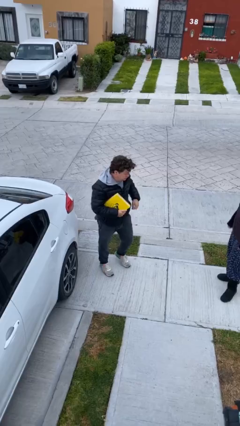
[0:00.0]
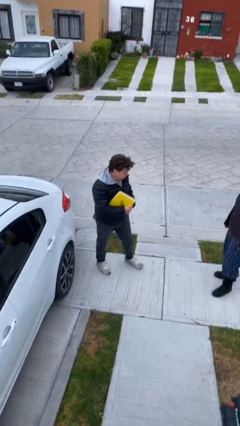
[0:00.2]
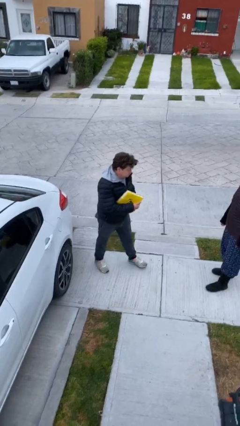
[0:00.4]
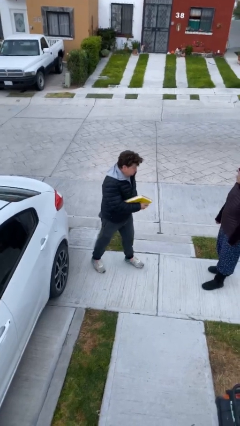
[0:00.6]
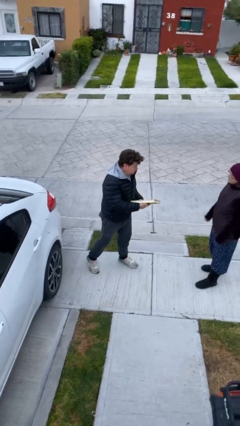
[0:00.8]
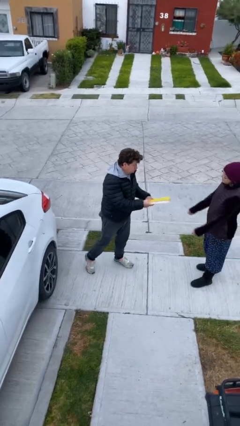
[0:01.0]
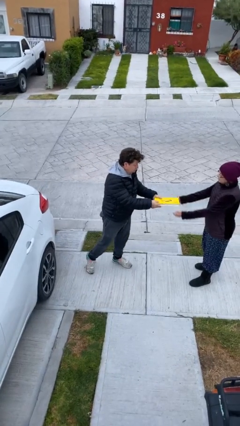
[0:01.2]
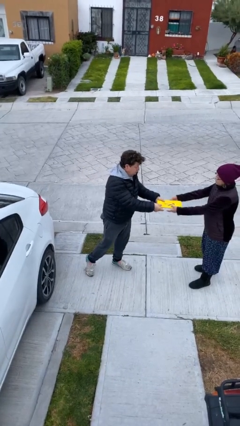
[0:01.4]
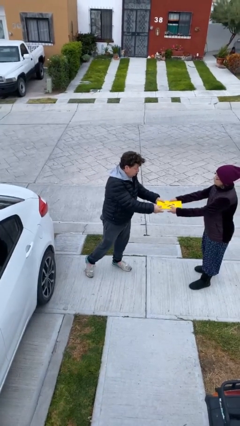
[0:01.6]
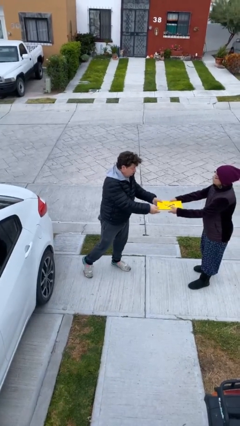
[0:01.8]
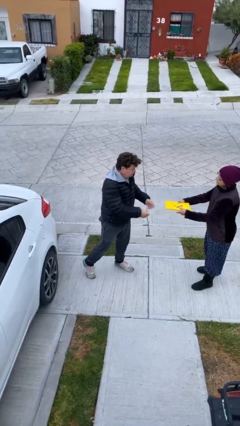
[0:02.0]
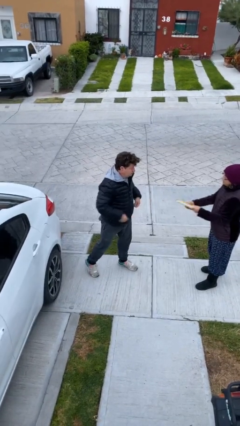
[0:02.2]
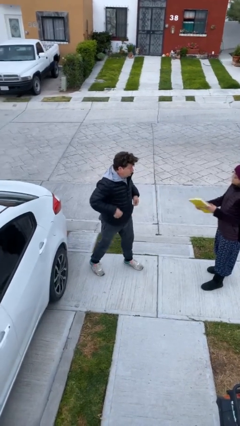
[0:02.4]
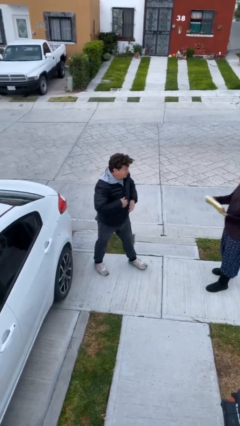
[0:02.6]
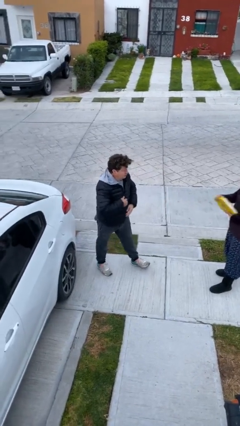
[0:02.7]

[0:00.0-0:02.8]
person transfers object to person

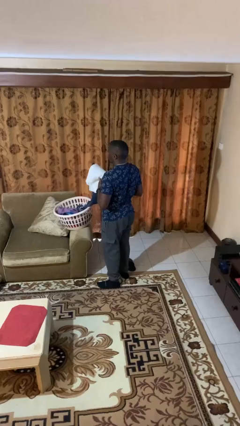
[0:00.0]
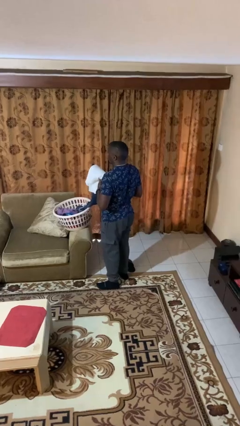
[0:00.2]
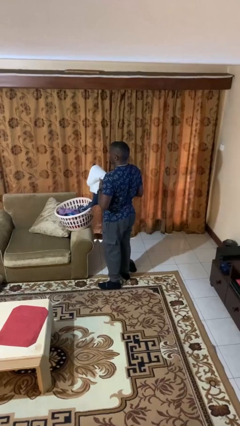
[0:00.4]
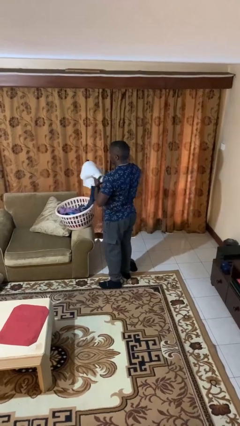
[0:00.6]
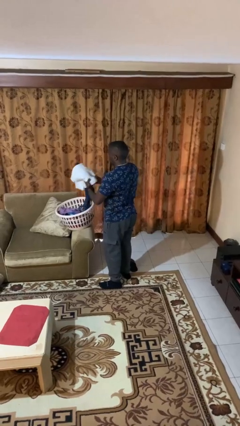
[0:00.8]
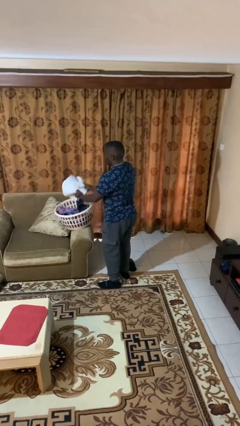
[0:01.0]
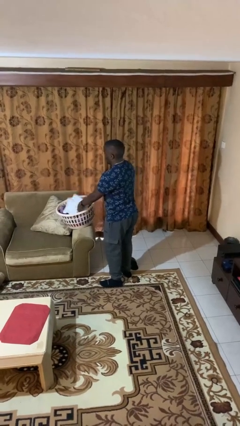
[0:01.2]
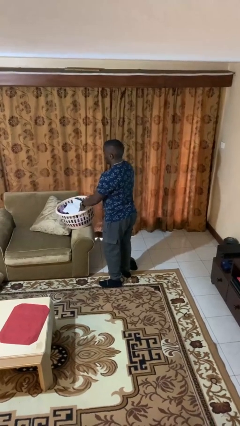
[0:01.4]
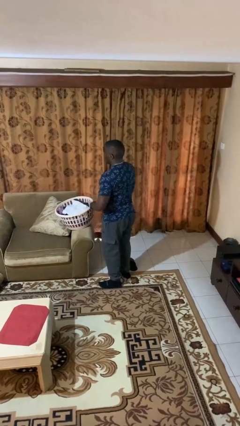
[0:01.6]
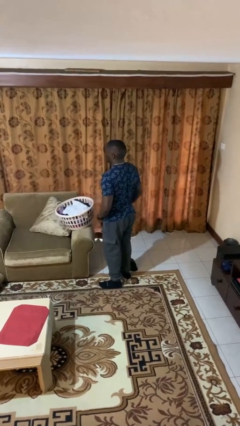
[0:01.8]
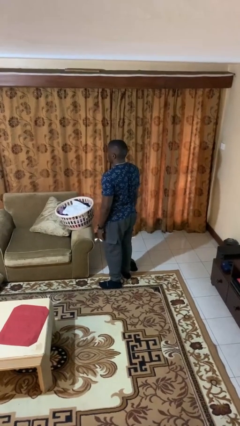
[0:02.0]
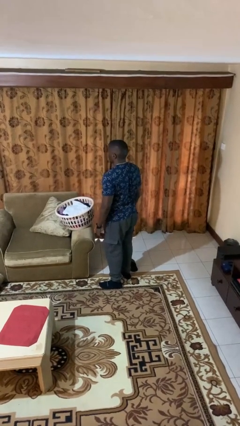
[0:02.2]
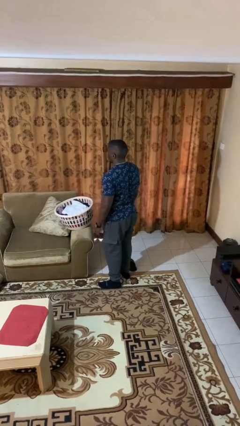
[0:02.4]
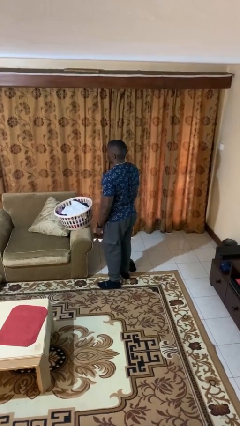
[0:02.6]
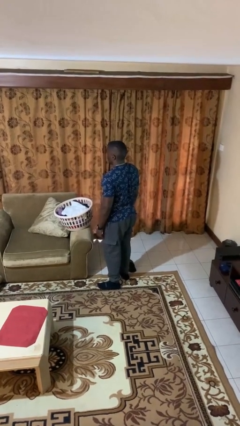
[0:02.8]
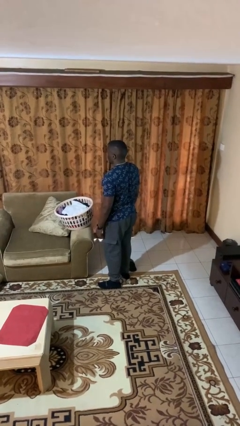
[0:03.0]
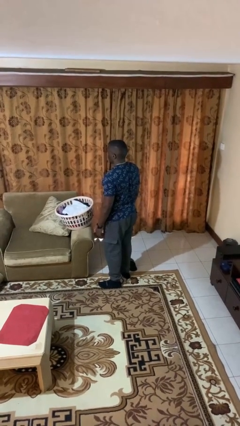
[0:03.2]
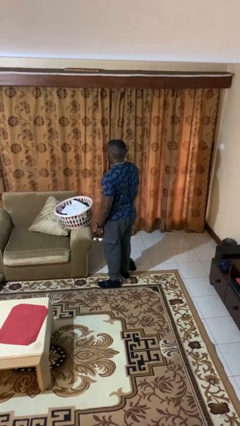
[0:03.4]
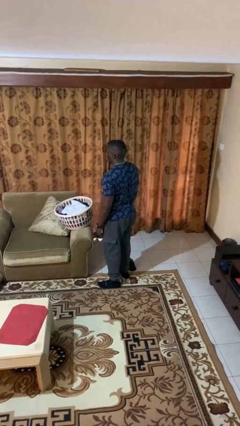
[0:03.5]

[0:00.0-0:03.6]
person puts object into basket

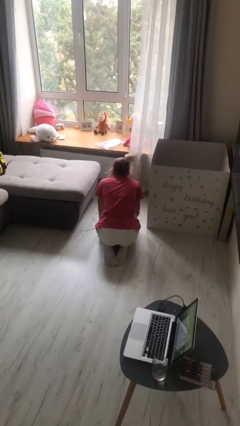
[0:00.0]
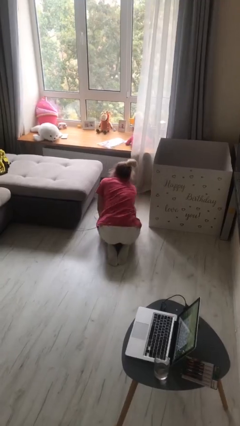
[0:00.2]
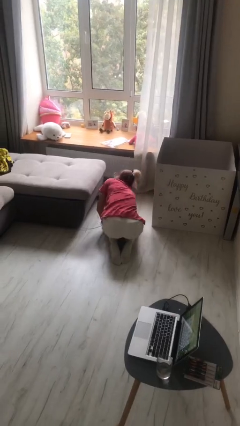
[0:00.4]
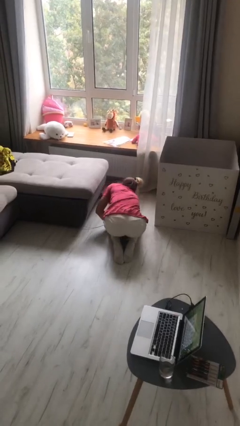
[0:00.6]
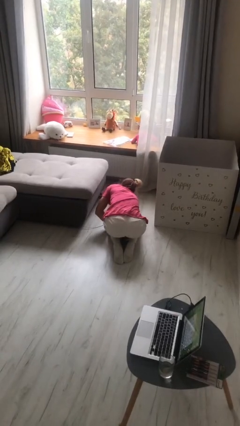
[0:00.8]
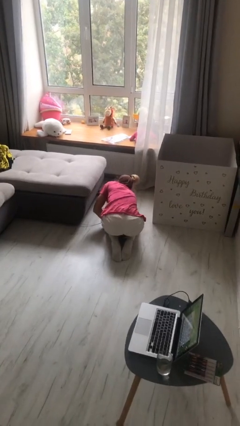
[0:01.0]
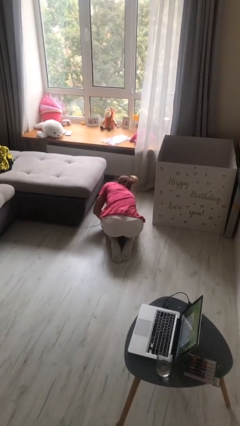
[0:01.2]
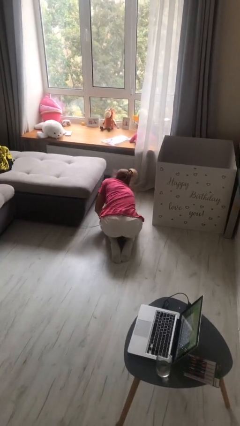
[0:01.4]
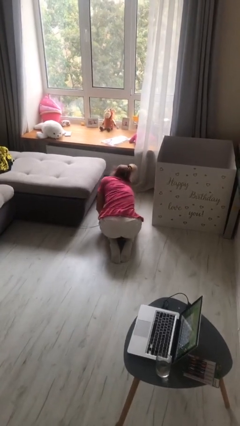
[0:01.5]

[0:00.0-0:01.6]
person searches under couch

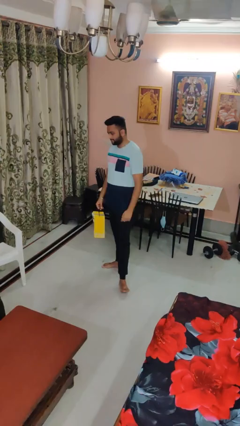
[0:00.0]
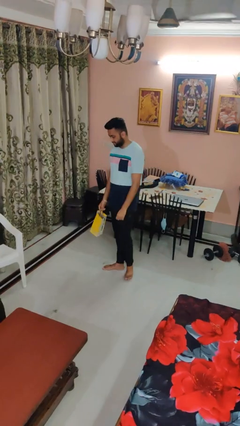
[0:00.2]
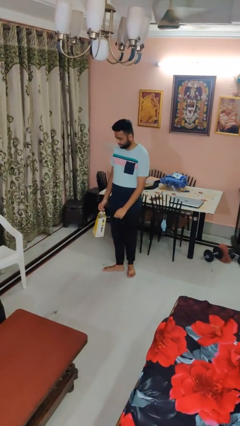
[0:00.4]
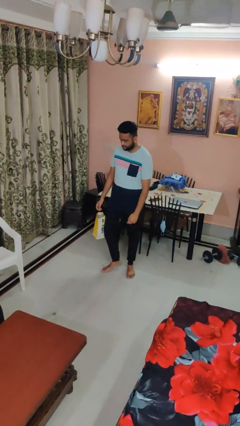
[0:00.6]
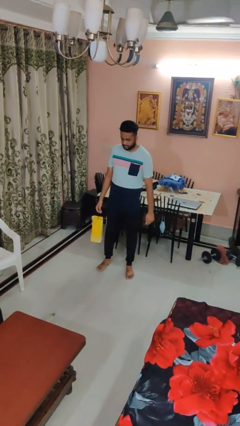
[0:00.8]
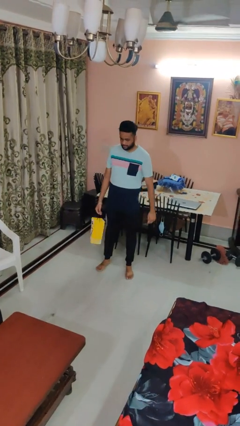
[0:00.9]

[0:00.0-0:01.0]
person drops object

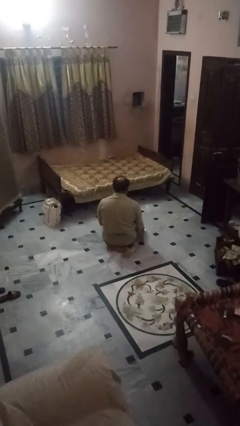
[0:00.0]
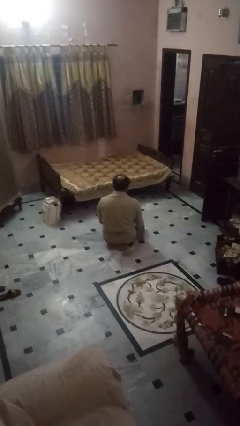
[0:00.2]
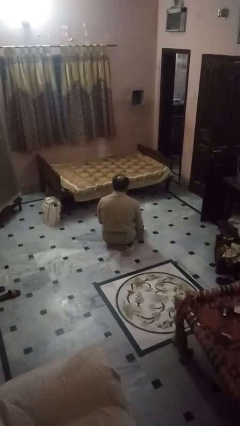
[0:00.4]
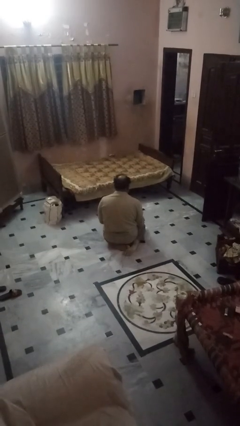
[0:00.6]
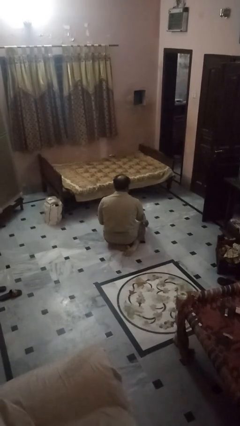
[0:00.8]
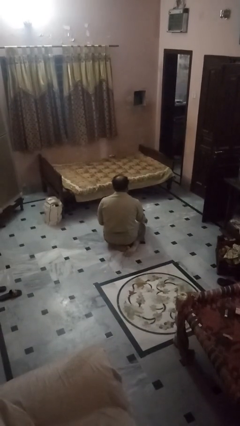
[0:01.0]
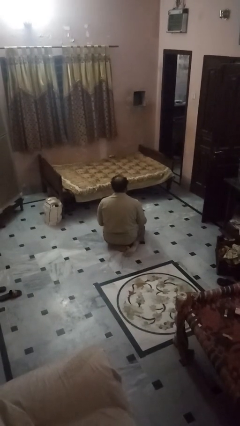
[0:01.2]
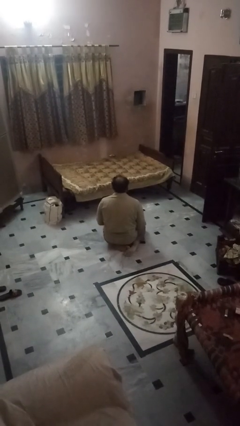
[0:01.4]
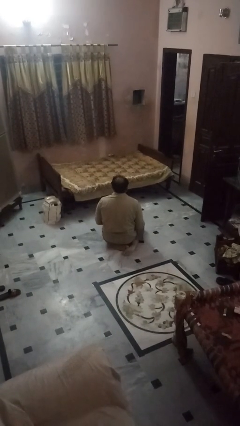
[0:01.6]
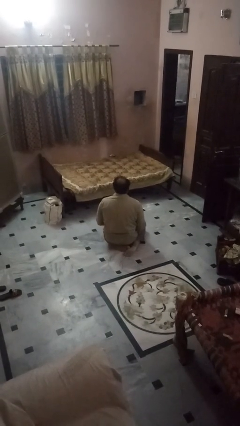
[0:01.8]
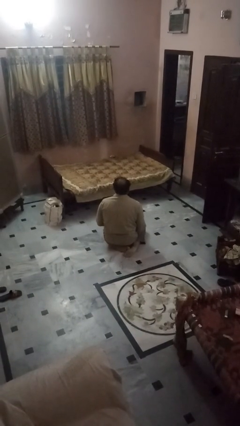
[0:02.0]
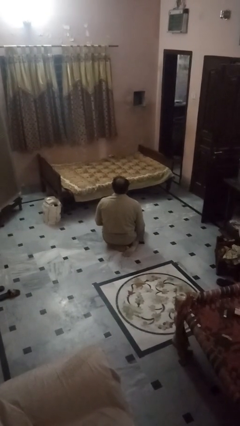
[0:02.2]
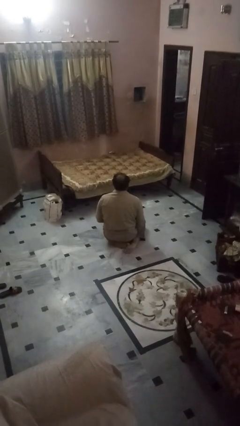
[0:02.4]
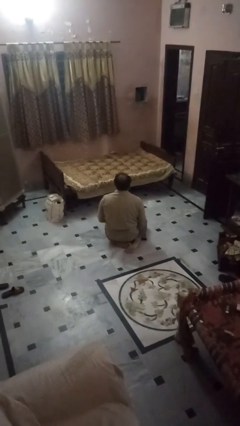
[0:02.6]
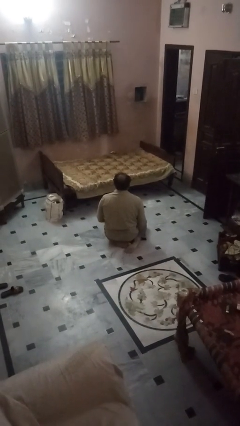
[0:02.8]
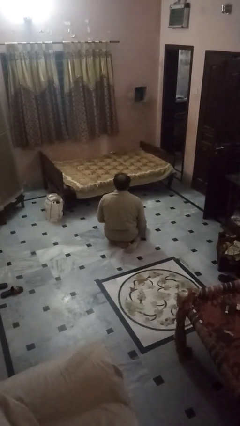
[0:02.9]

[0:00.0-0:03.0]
person picks up object from floor

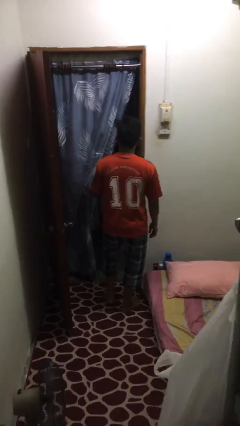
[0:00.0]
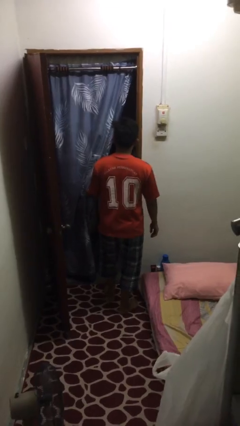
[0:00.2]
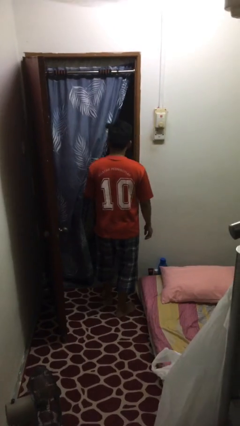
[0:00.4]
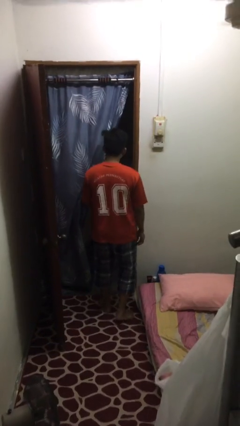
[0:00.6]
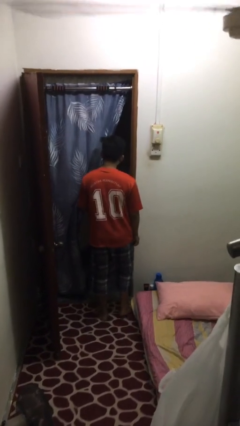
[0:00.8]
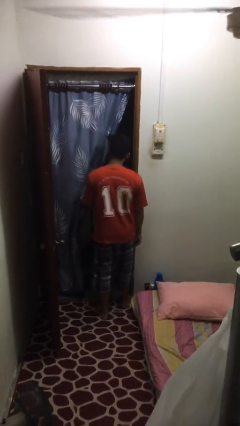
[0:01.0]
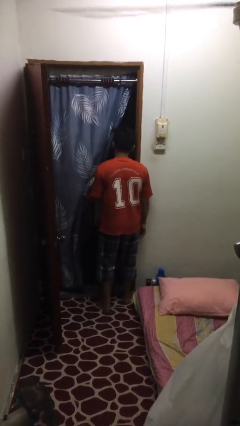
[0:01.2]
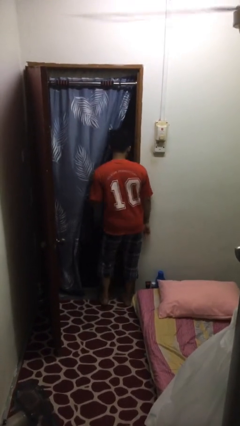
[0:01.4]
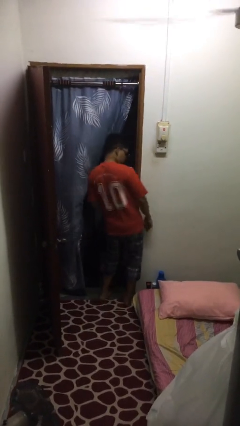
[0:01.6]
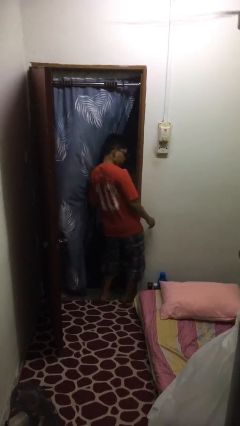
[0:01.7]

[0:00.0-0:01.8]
person bumps into wall

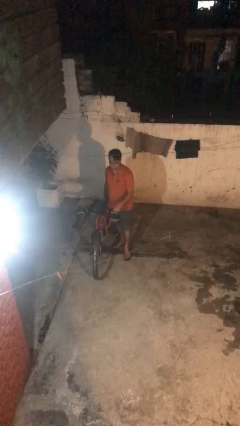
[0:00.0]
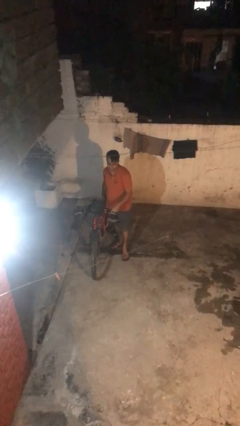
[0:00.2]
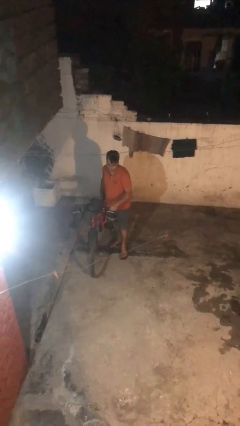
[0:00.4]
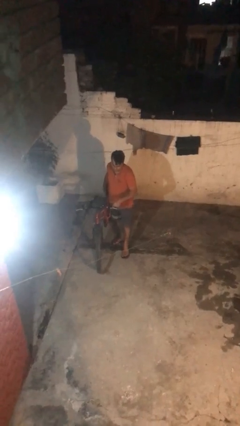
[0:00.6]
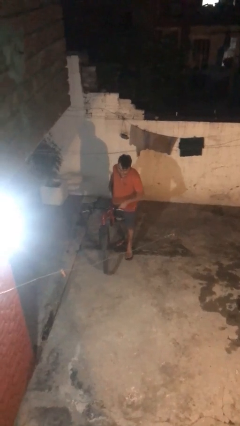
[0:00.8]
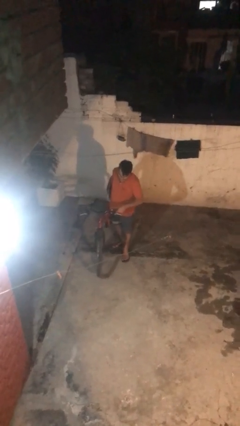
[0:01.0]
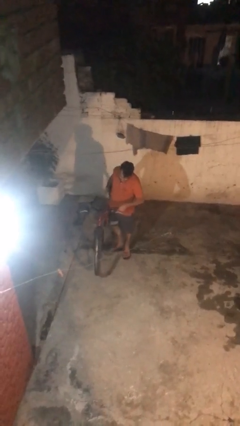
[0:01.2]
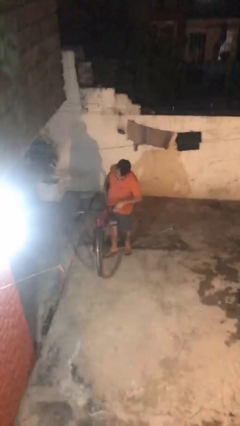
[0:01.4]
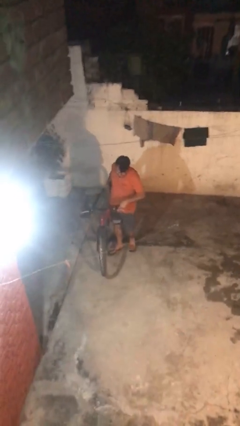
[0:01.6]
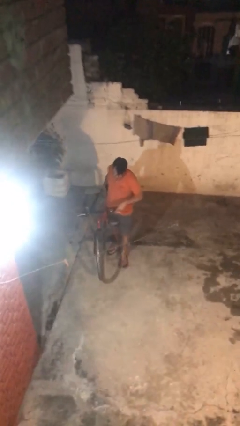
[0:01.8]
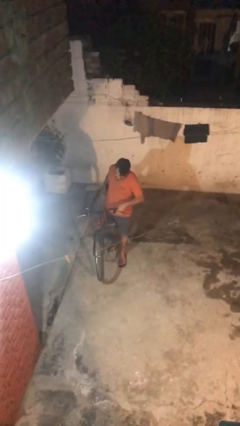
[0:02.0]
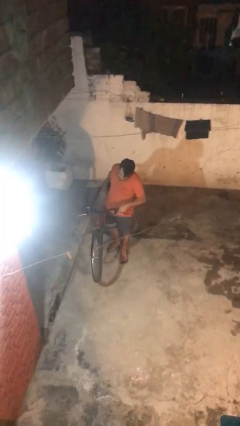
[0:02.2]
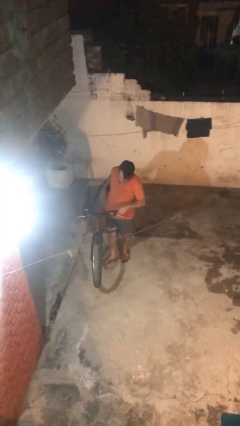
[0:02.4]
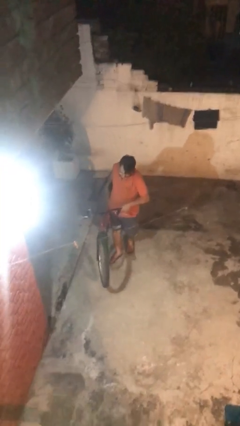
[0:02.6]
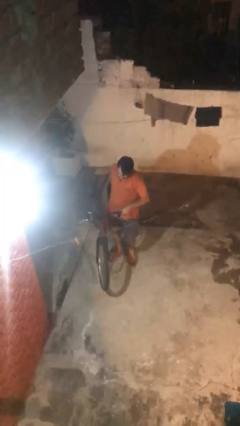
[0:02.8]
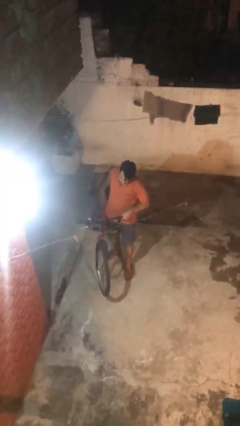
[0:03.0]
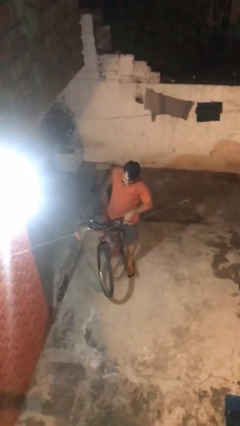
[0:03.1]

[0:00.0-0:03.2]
person carries bicycle
